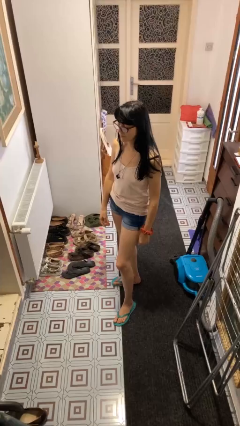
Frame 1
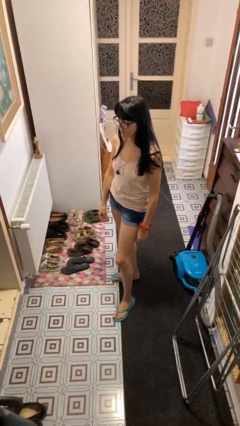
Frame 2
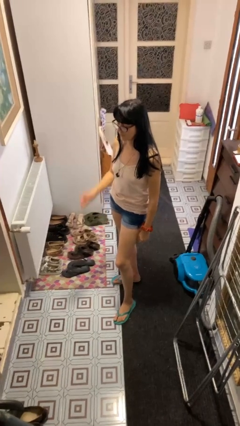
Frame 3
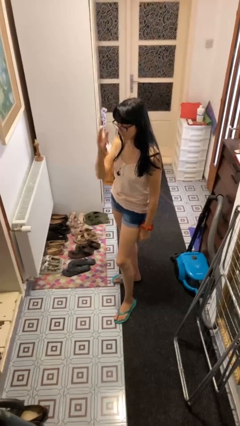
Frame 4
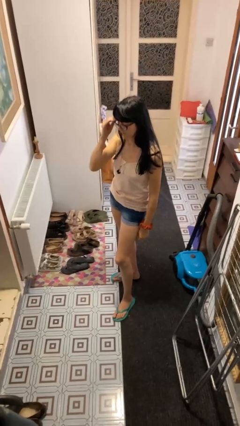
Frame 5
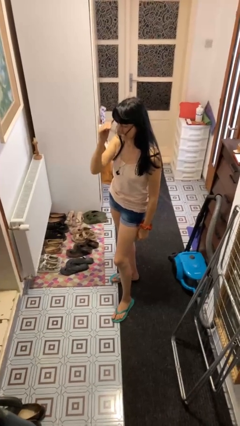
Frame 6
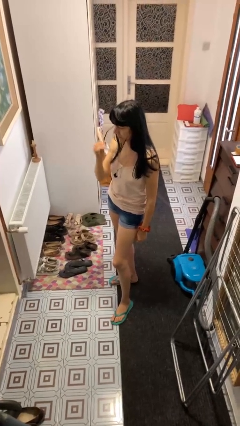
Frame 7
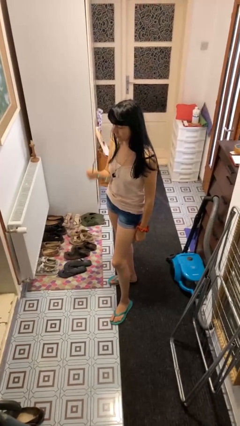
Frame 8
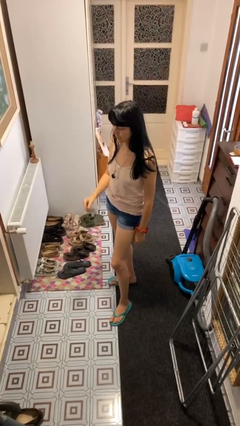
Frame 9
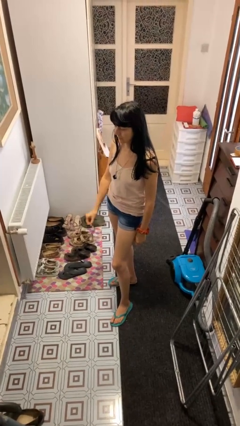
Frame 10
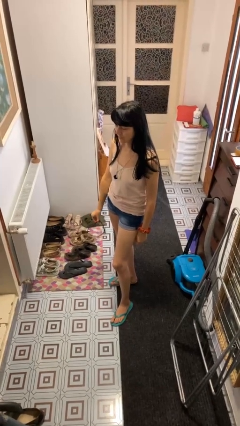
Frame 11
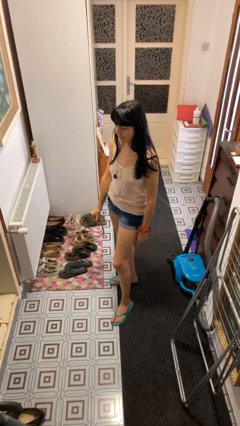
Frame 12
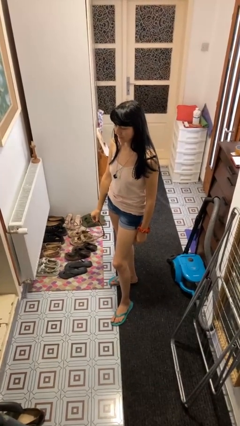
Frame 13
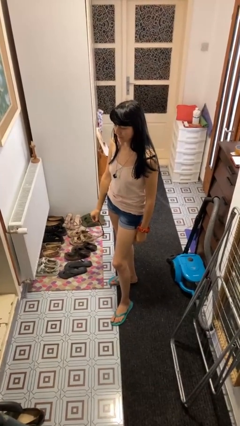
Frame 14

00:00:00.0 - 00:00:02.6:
person takes off glasses

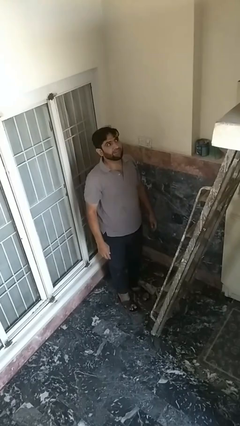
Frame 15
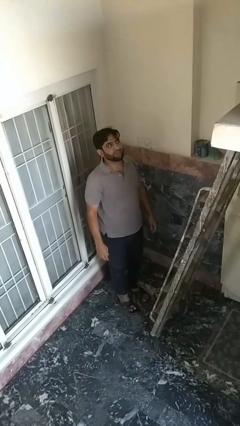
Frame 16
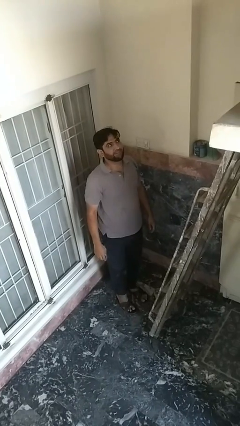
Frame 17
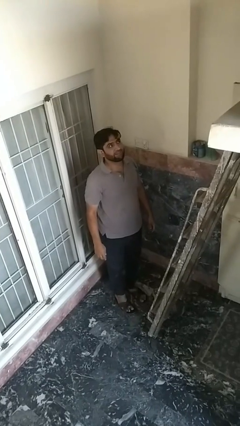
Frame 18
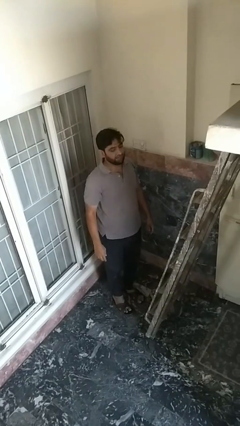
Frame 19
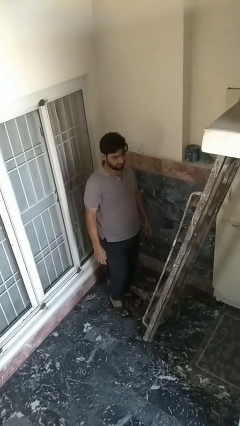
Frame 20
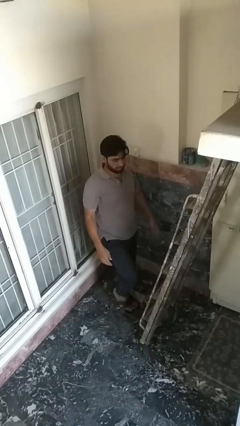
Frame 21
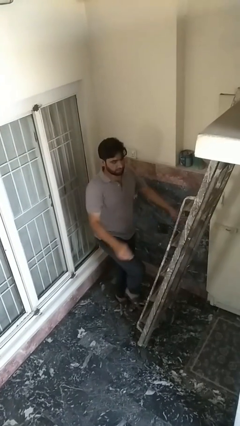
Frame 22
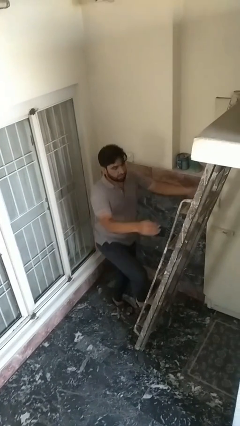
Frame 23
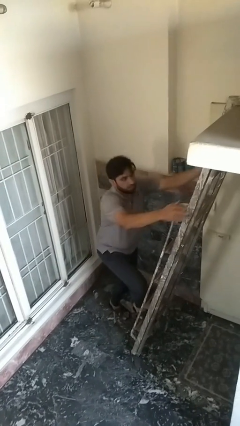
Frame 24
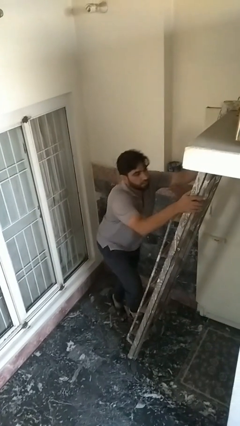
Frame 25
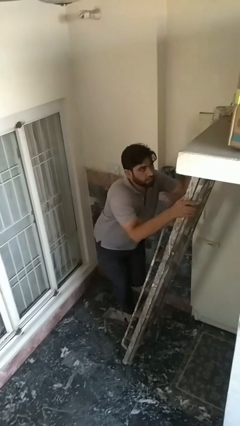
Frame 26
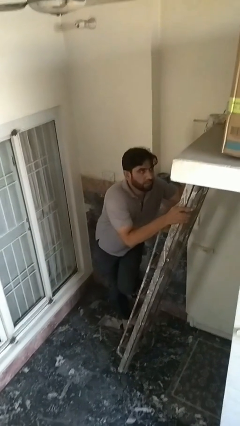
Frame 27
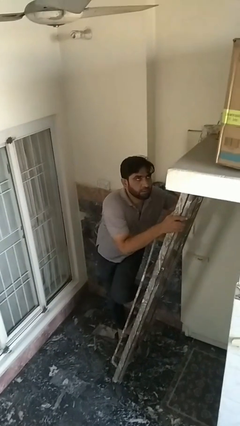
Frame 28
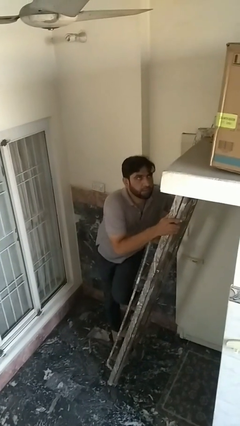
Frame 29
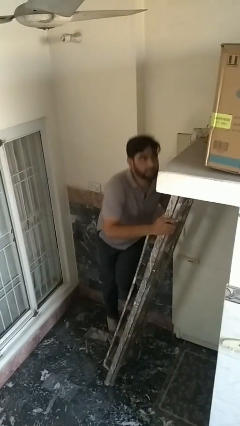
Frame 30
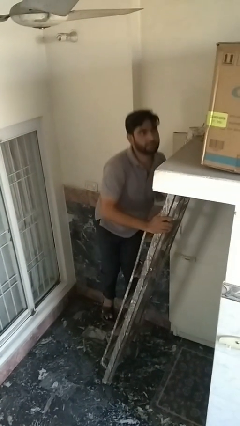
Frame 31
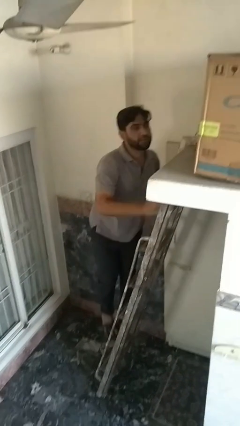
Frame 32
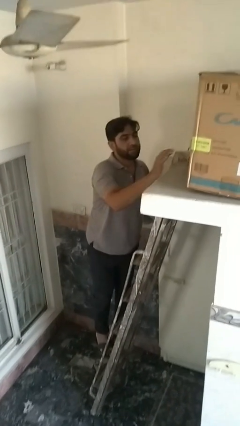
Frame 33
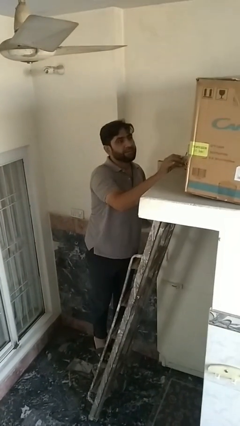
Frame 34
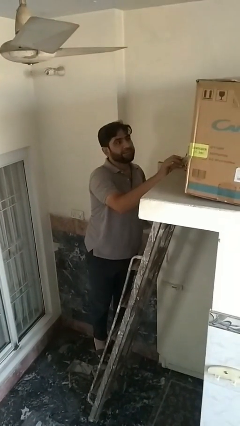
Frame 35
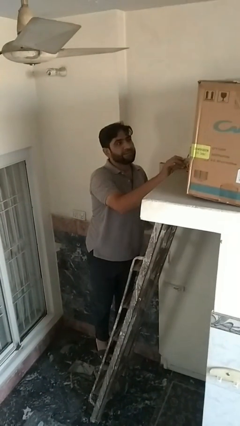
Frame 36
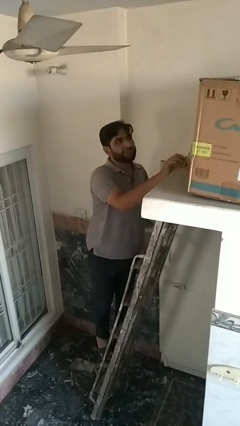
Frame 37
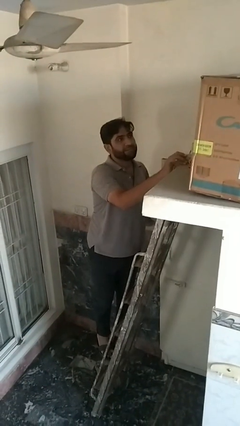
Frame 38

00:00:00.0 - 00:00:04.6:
person climbs up ladder

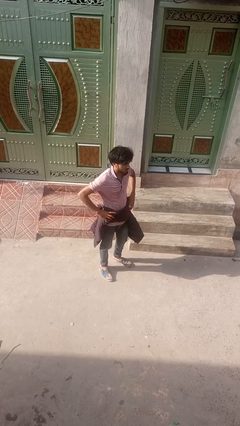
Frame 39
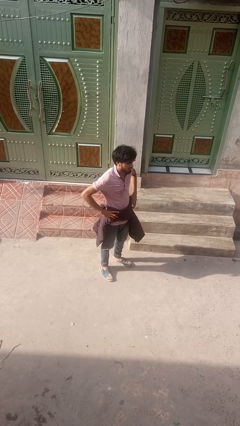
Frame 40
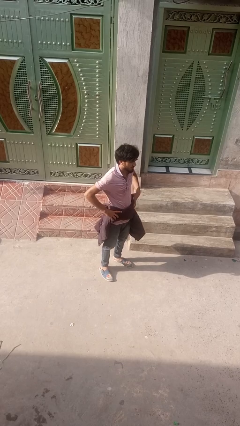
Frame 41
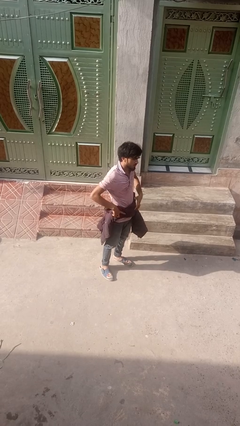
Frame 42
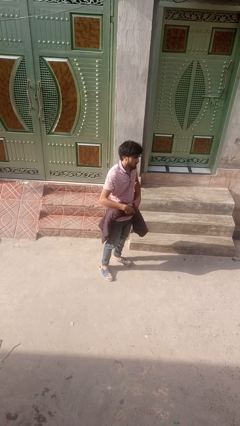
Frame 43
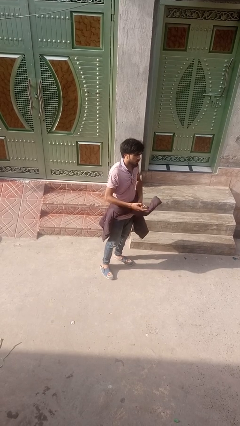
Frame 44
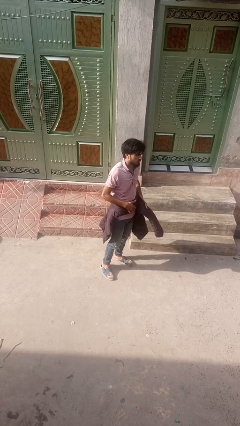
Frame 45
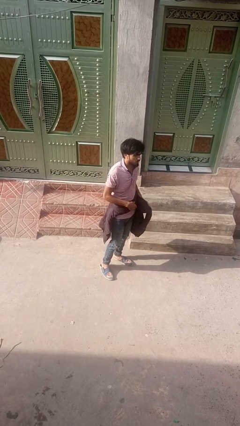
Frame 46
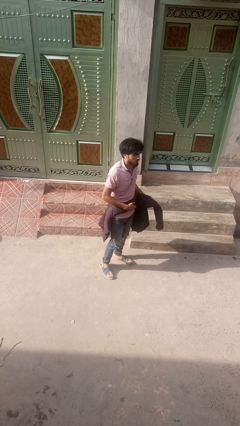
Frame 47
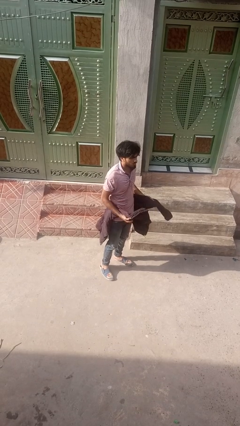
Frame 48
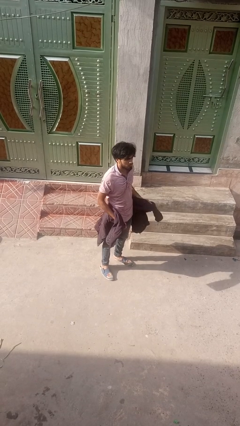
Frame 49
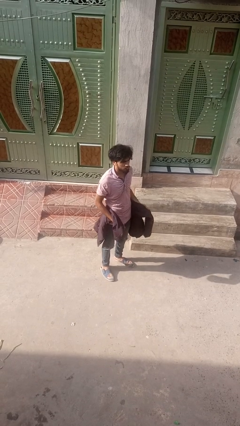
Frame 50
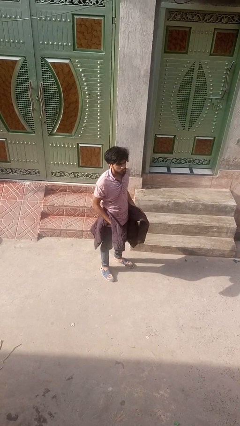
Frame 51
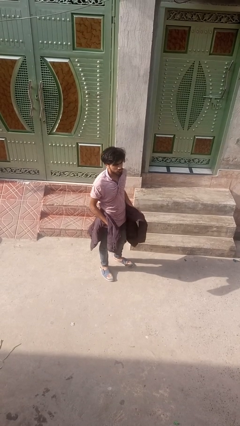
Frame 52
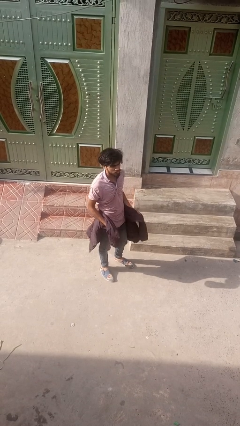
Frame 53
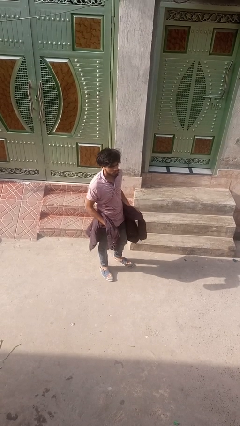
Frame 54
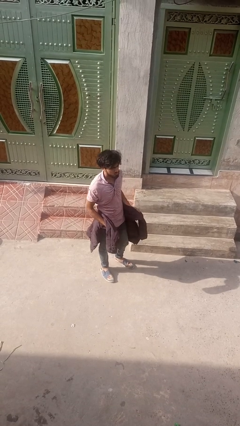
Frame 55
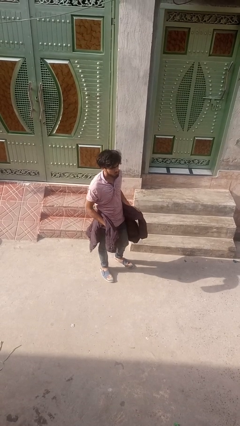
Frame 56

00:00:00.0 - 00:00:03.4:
person unties jacket around waist

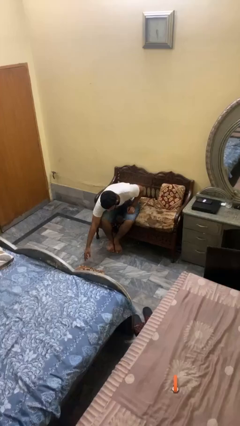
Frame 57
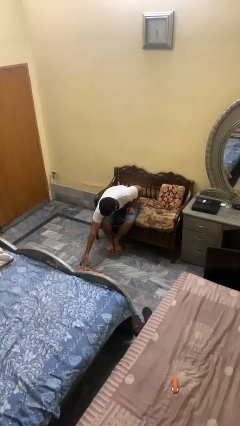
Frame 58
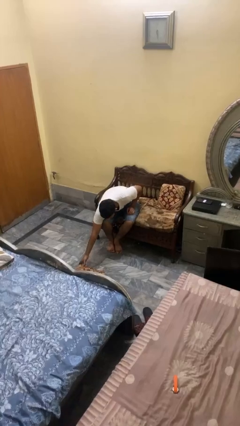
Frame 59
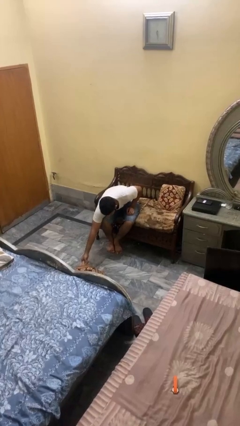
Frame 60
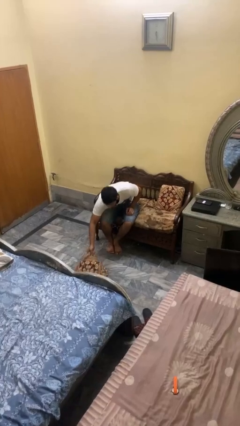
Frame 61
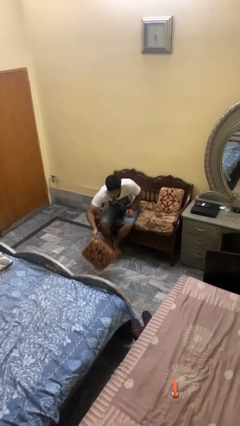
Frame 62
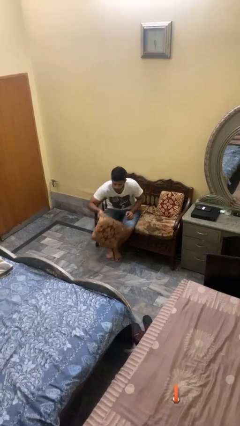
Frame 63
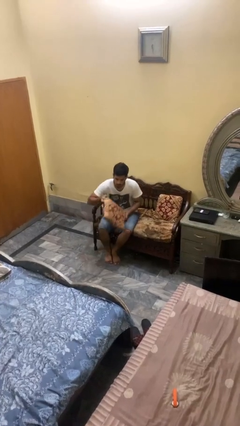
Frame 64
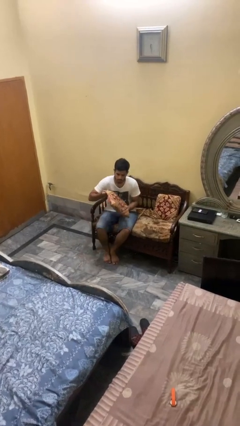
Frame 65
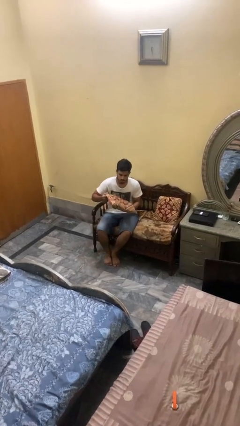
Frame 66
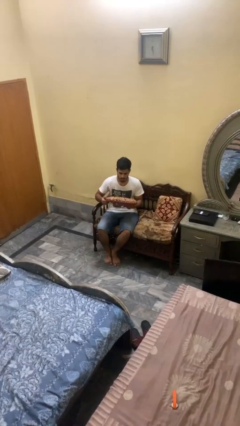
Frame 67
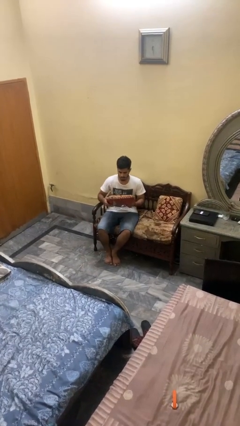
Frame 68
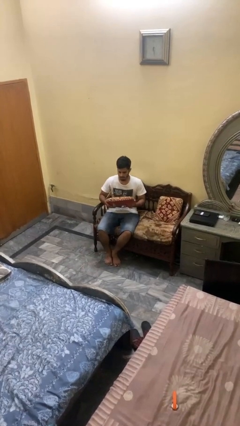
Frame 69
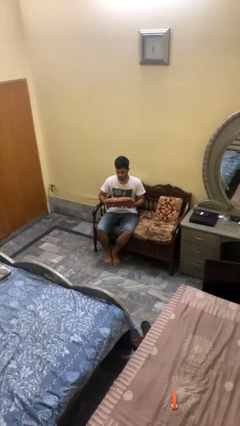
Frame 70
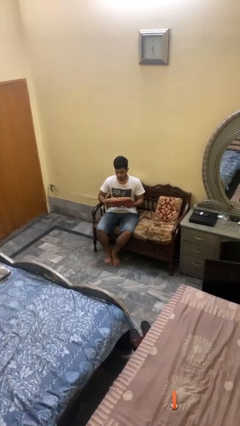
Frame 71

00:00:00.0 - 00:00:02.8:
person picks up object from floor

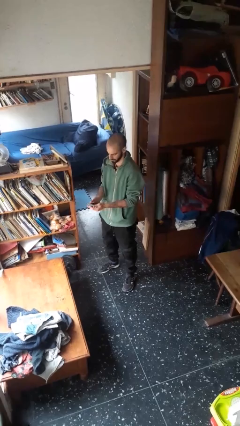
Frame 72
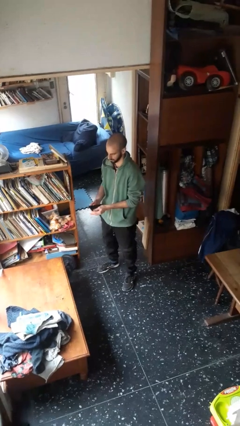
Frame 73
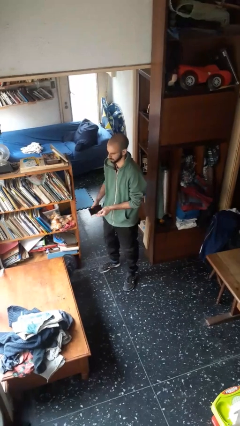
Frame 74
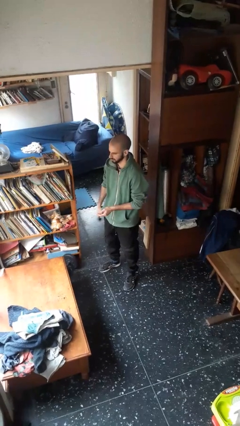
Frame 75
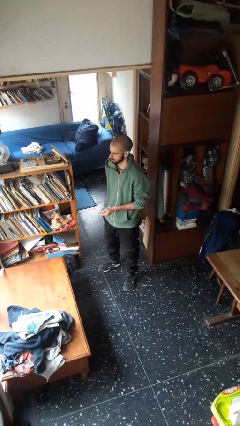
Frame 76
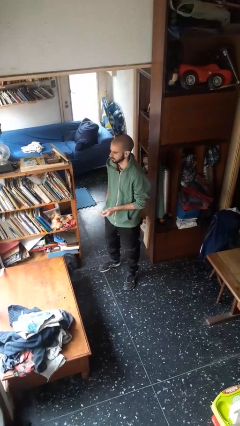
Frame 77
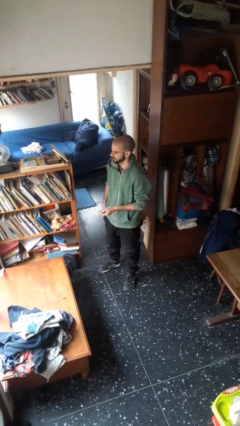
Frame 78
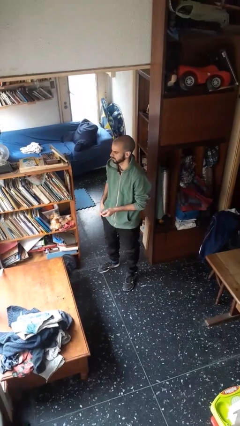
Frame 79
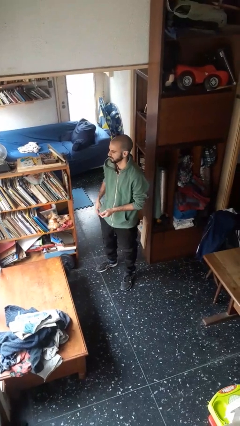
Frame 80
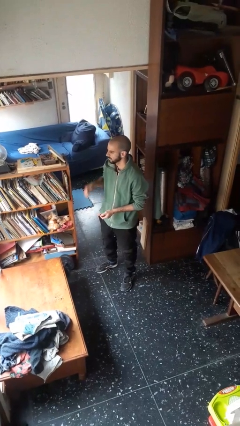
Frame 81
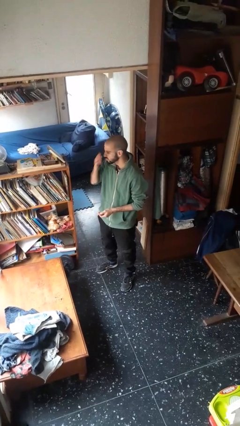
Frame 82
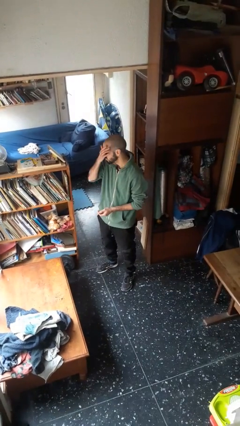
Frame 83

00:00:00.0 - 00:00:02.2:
person puts phone into pocket

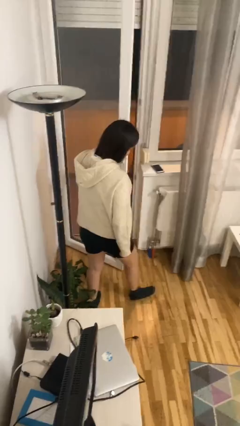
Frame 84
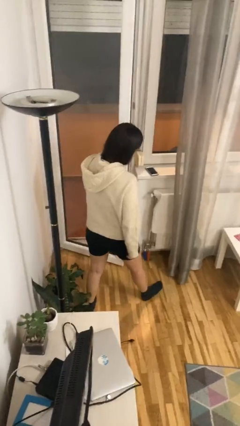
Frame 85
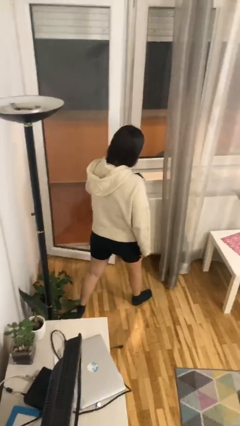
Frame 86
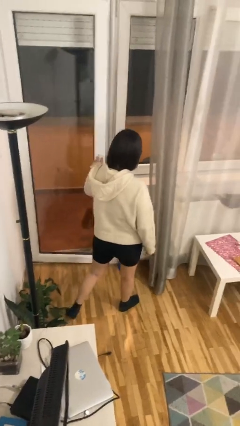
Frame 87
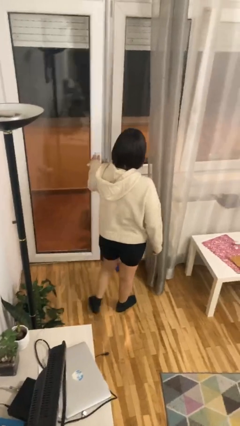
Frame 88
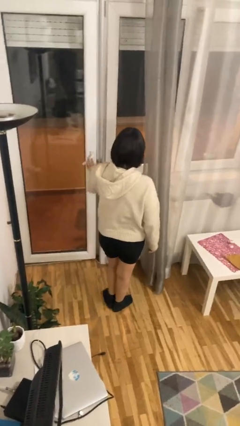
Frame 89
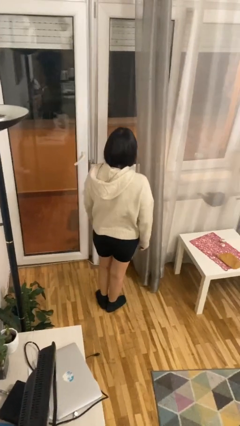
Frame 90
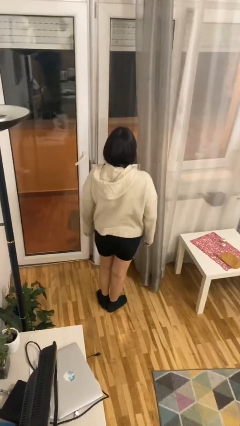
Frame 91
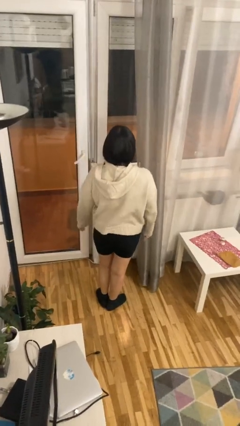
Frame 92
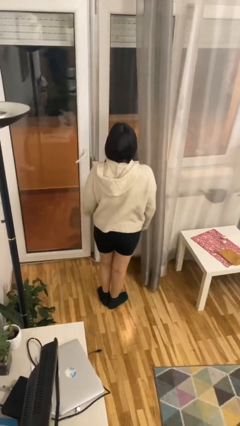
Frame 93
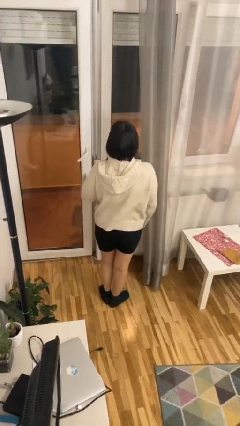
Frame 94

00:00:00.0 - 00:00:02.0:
person closes facility door
